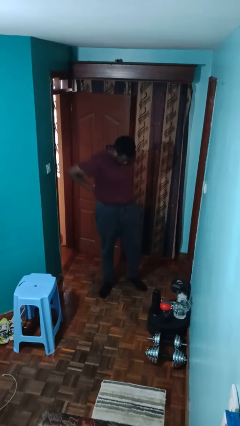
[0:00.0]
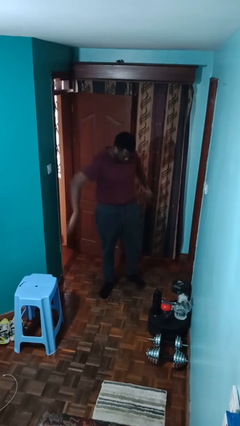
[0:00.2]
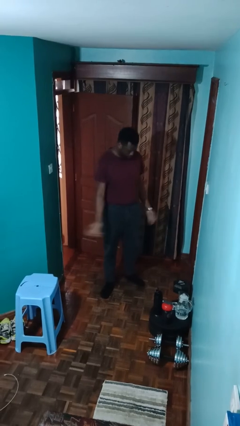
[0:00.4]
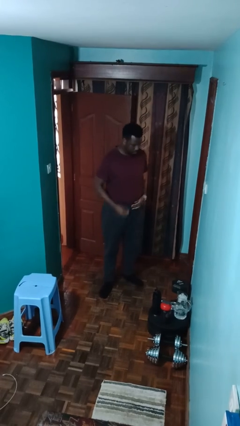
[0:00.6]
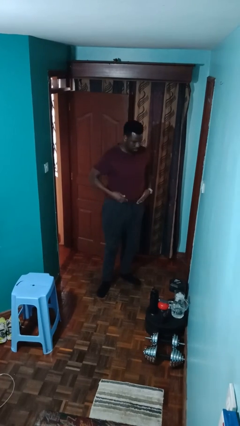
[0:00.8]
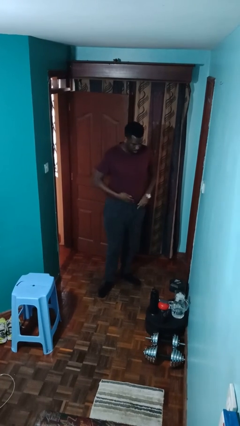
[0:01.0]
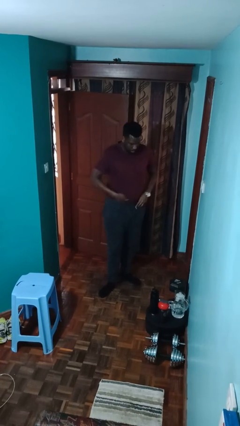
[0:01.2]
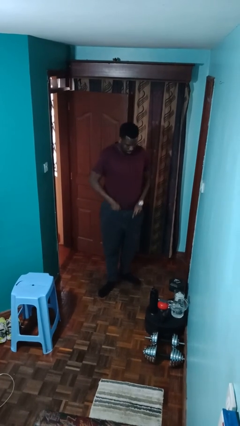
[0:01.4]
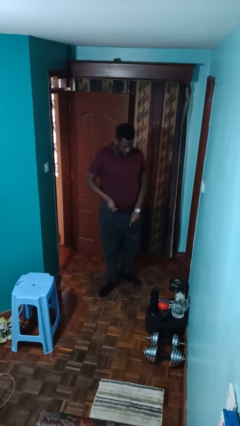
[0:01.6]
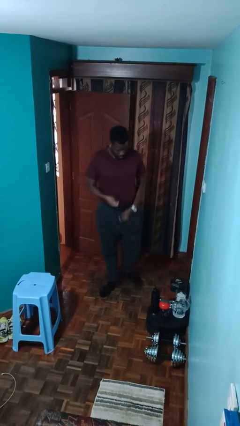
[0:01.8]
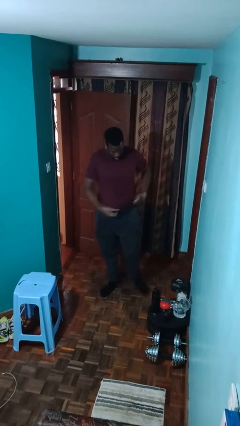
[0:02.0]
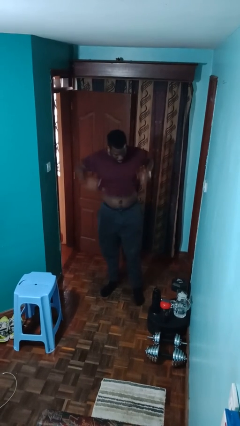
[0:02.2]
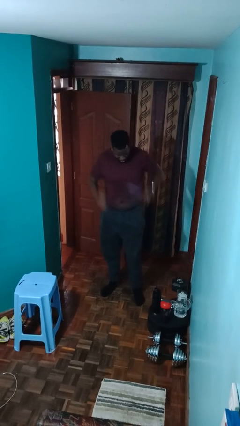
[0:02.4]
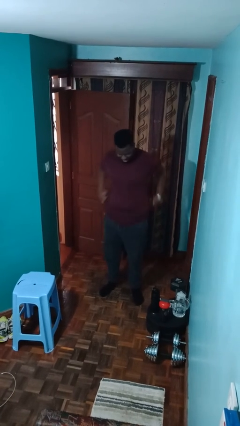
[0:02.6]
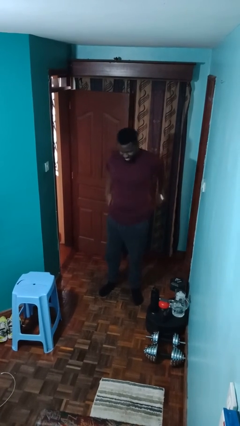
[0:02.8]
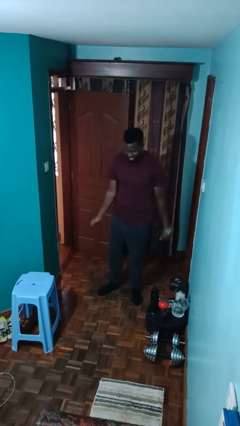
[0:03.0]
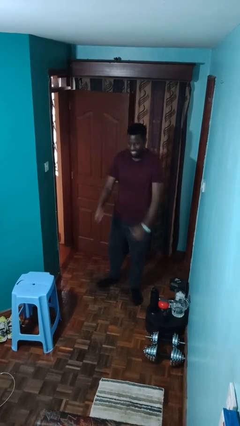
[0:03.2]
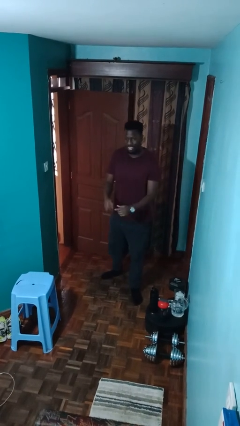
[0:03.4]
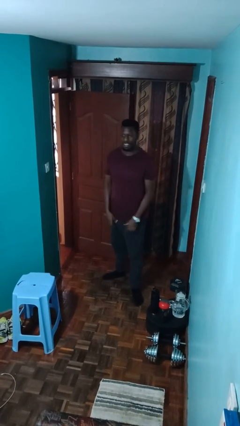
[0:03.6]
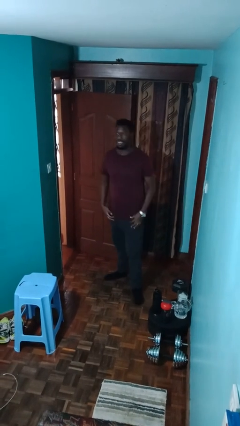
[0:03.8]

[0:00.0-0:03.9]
person untucks shirt

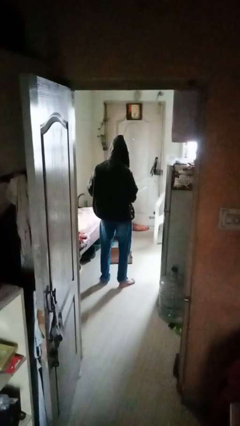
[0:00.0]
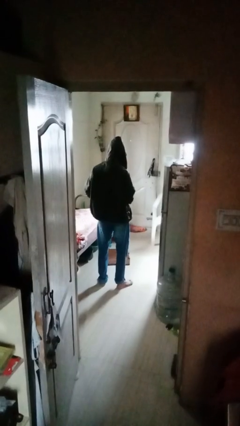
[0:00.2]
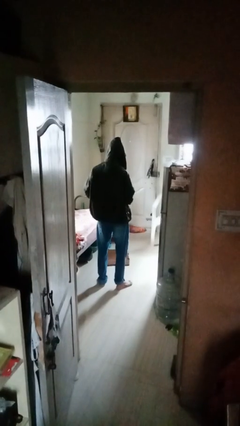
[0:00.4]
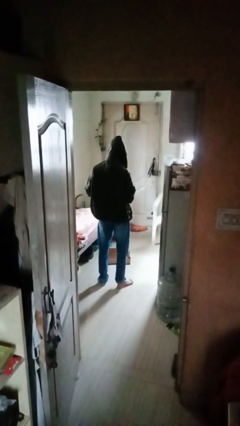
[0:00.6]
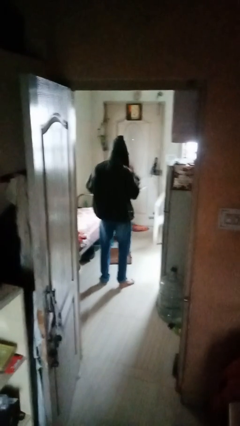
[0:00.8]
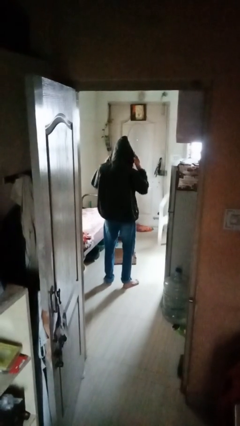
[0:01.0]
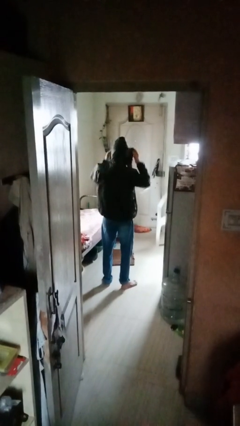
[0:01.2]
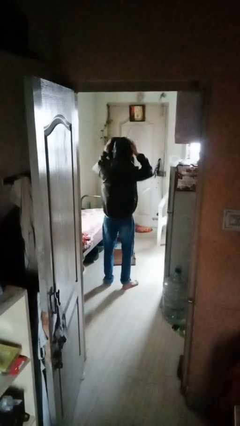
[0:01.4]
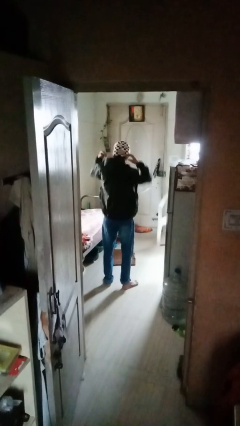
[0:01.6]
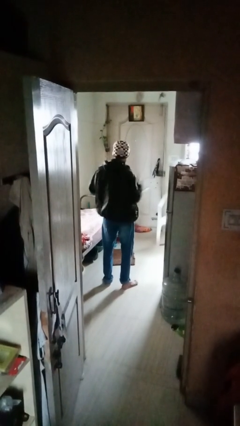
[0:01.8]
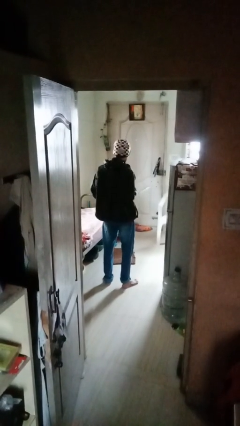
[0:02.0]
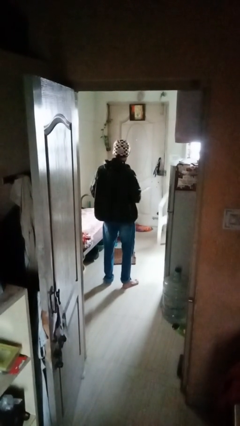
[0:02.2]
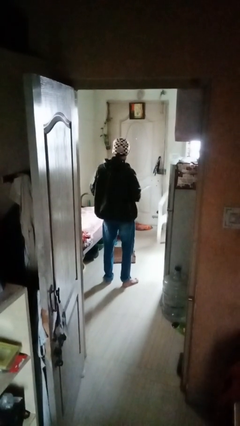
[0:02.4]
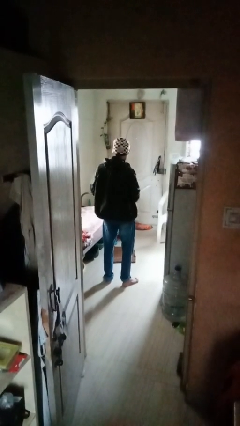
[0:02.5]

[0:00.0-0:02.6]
person takes off hoodie

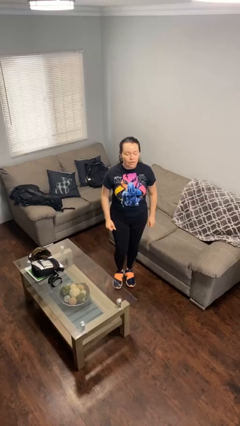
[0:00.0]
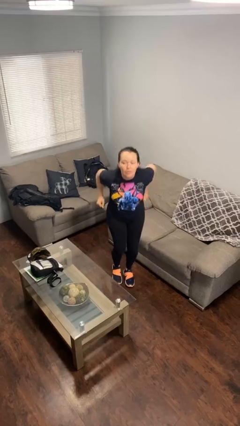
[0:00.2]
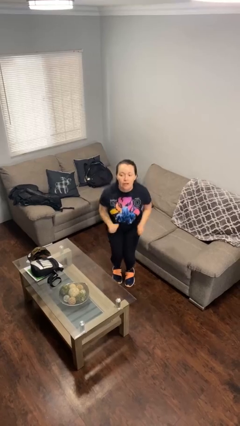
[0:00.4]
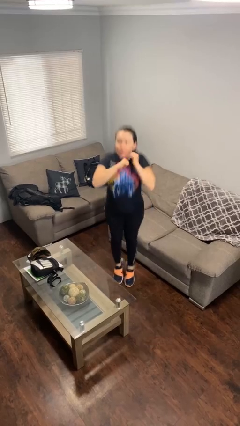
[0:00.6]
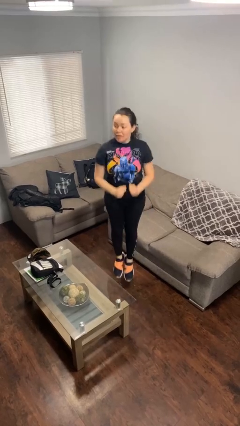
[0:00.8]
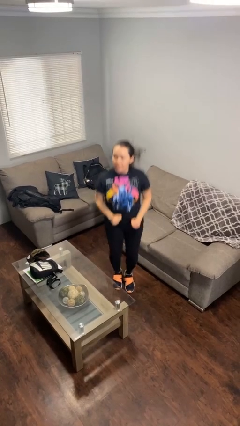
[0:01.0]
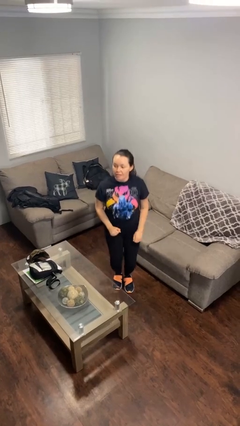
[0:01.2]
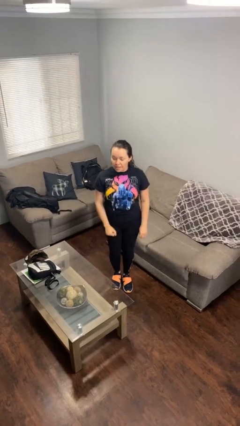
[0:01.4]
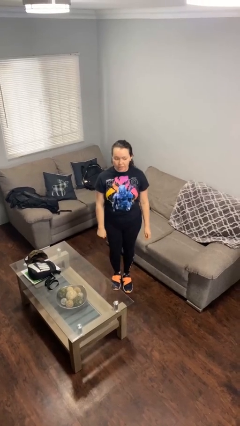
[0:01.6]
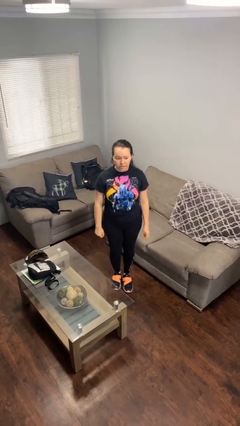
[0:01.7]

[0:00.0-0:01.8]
person jumps

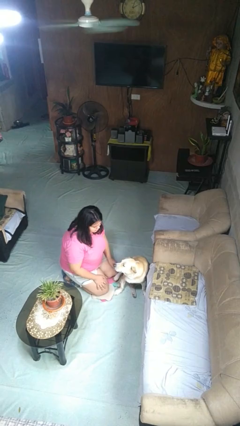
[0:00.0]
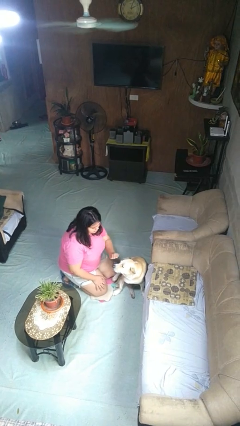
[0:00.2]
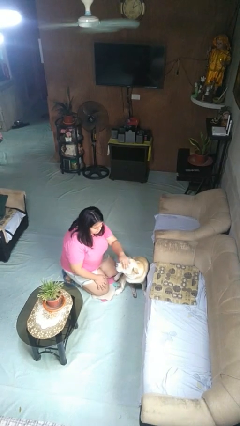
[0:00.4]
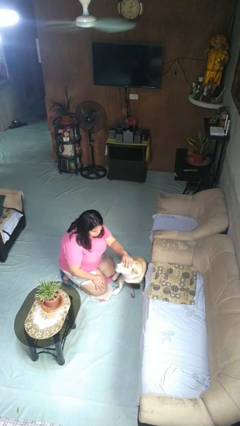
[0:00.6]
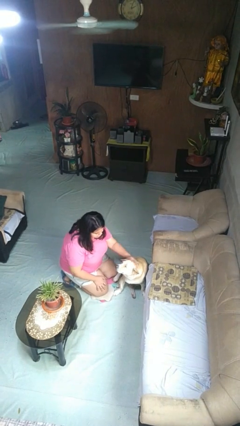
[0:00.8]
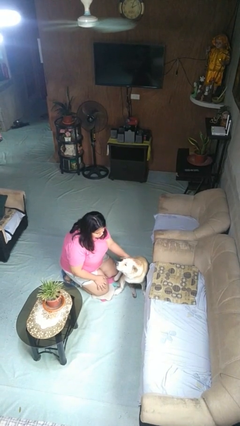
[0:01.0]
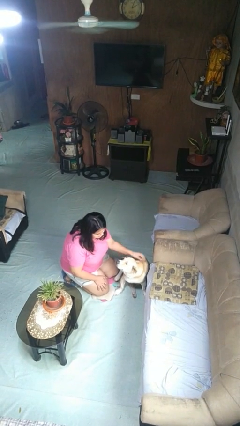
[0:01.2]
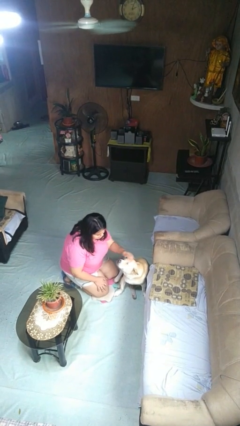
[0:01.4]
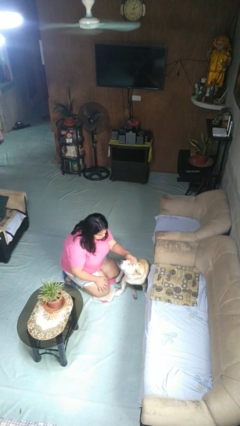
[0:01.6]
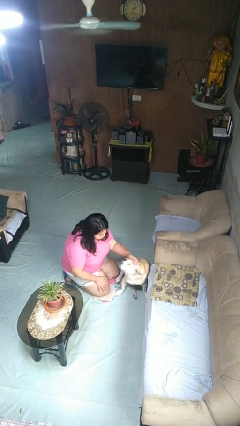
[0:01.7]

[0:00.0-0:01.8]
person pets dog

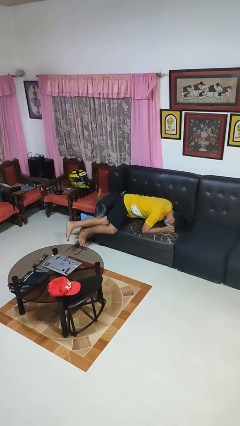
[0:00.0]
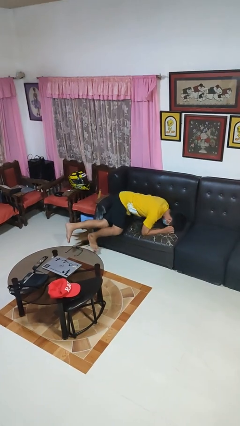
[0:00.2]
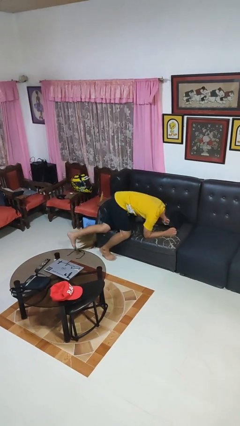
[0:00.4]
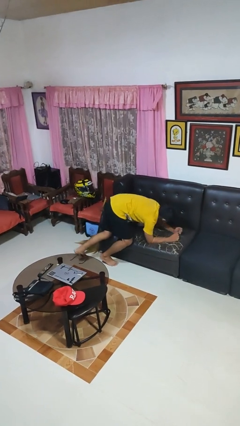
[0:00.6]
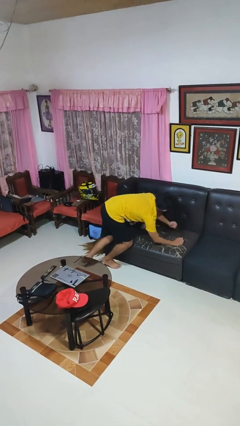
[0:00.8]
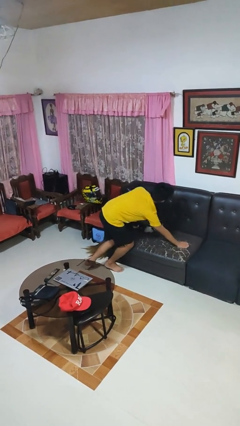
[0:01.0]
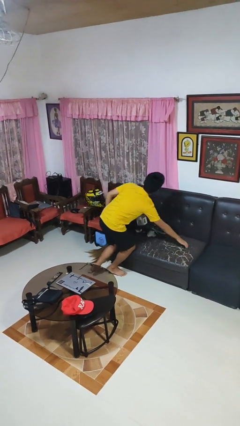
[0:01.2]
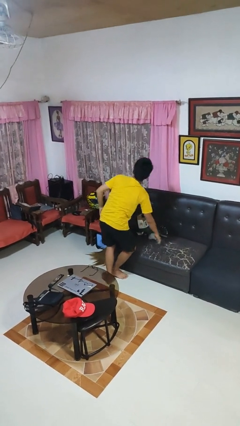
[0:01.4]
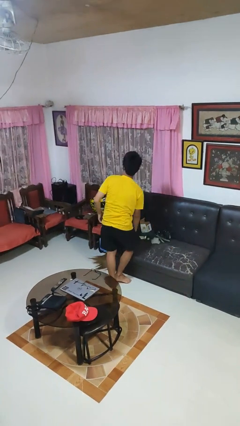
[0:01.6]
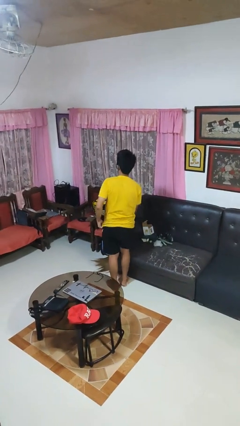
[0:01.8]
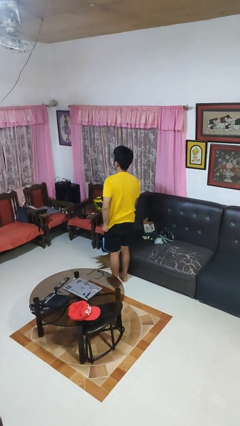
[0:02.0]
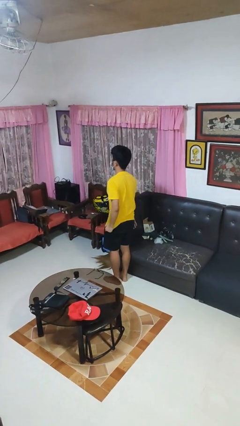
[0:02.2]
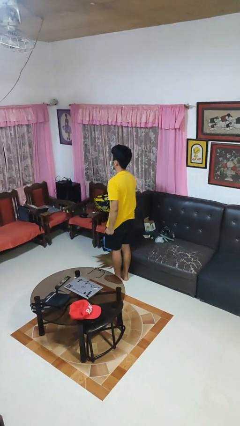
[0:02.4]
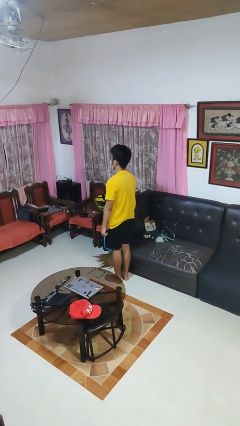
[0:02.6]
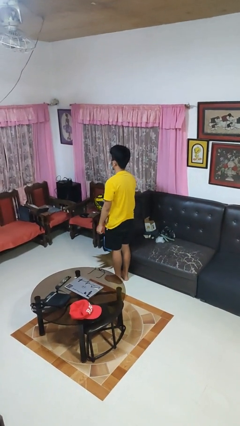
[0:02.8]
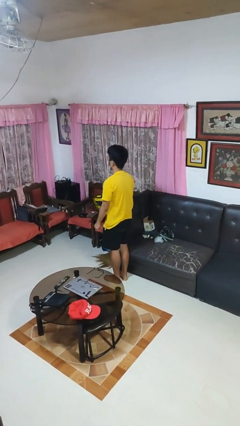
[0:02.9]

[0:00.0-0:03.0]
person stands up

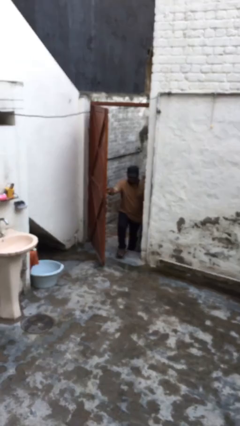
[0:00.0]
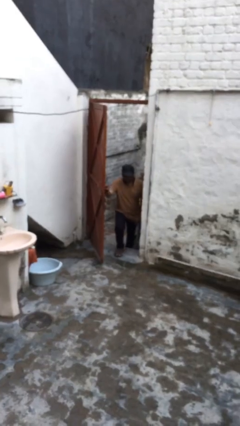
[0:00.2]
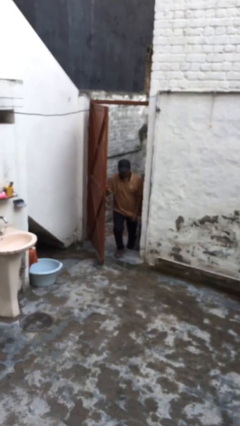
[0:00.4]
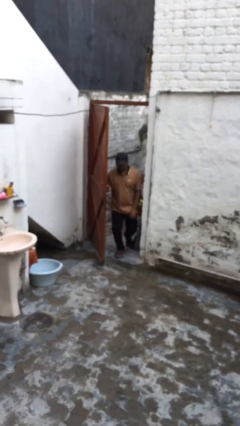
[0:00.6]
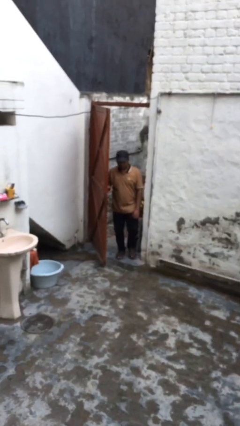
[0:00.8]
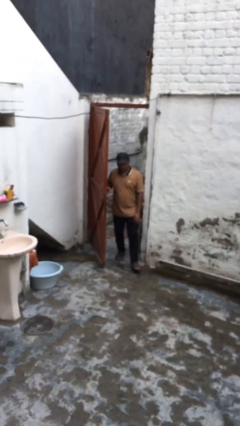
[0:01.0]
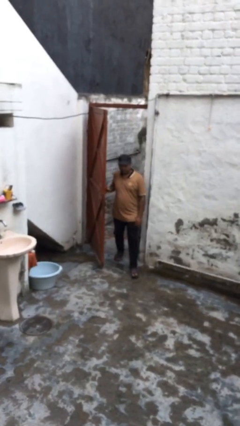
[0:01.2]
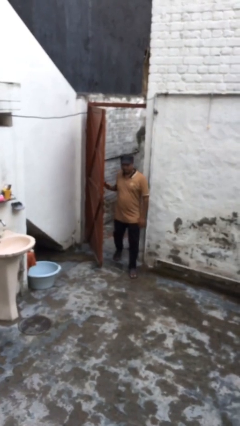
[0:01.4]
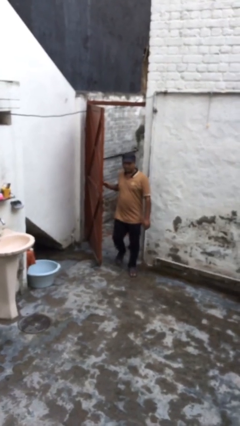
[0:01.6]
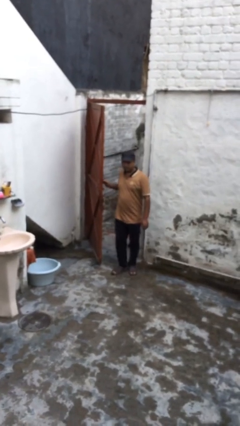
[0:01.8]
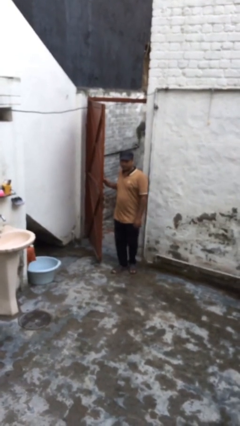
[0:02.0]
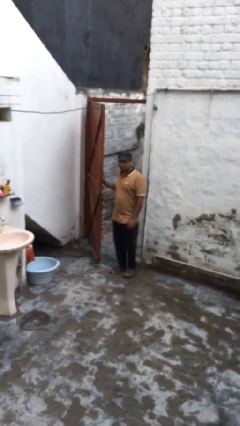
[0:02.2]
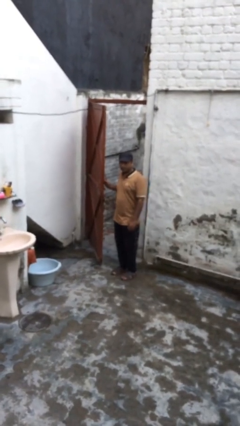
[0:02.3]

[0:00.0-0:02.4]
person enters scene through structure

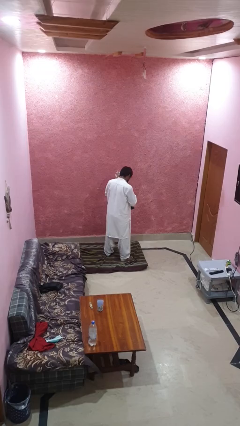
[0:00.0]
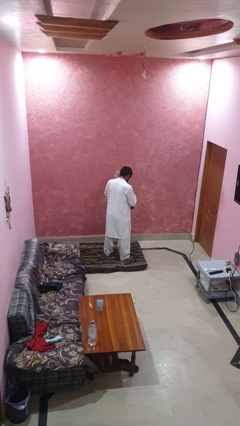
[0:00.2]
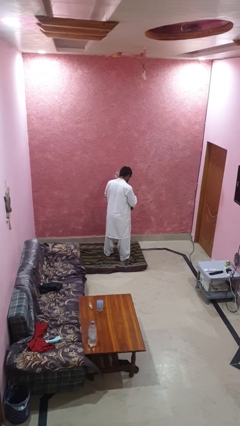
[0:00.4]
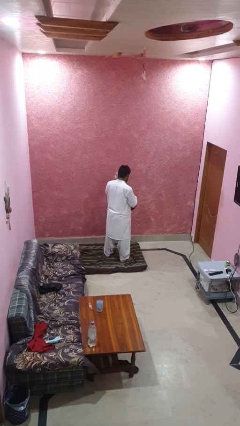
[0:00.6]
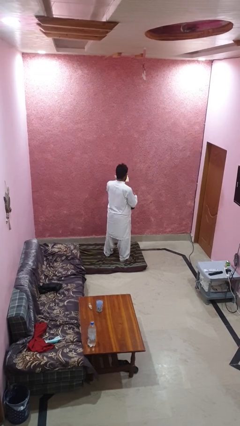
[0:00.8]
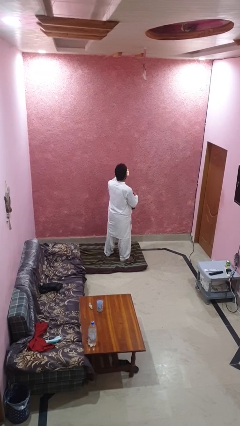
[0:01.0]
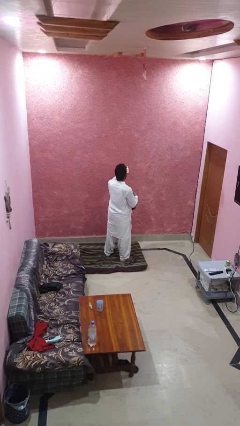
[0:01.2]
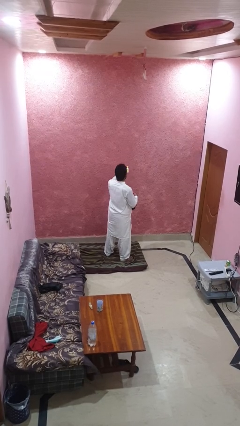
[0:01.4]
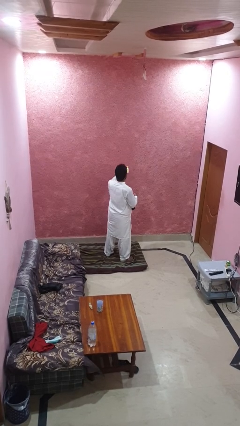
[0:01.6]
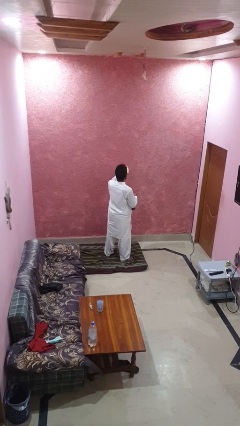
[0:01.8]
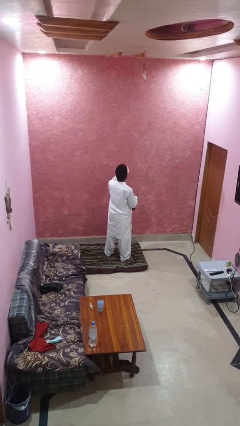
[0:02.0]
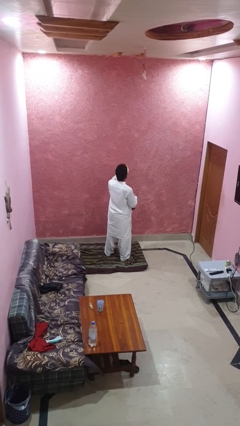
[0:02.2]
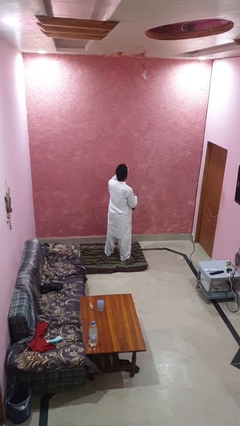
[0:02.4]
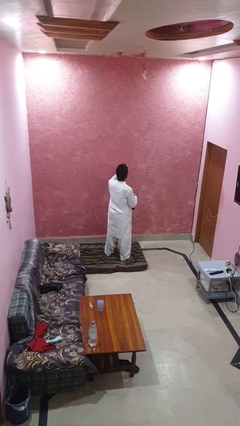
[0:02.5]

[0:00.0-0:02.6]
person takes object from purse
